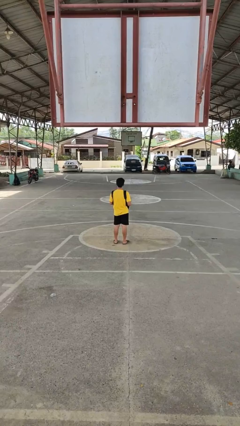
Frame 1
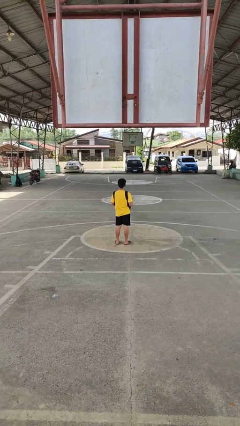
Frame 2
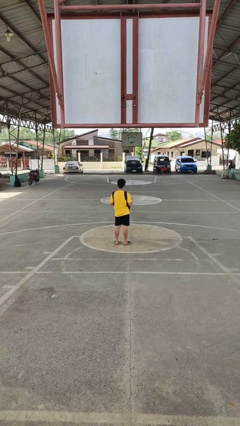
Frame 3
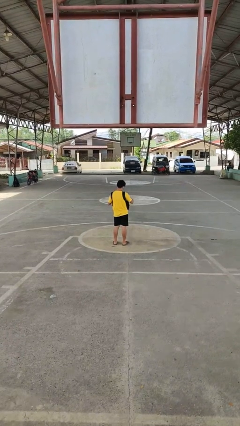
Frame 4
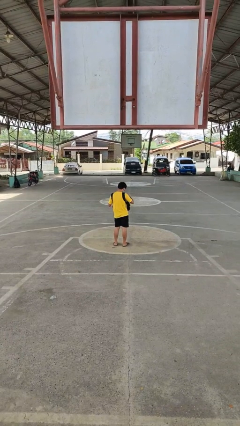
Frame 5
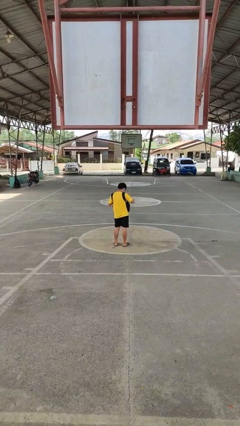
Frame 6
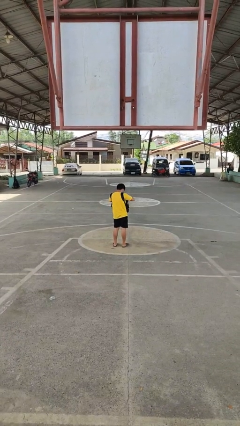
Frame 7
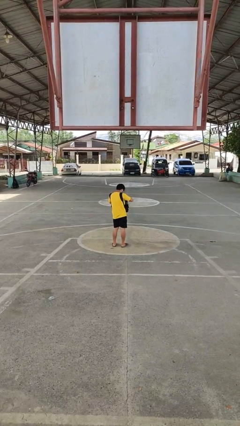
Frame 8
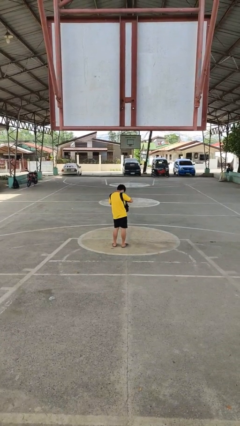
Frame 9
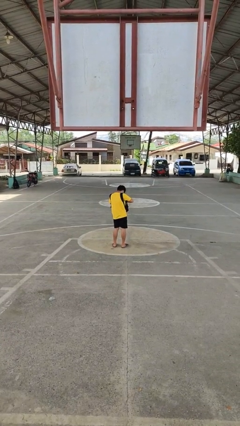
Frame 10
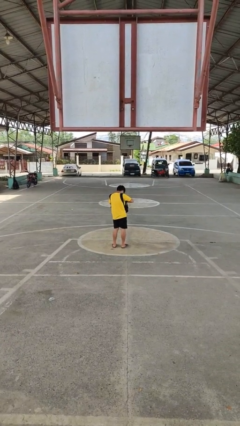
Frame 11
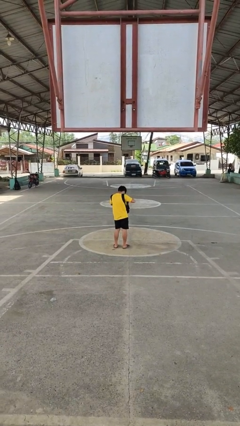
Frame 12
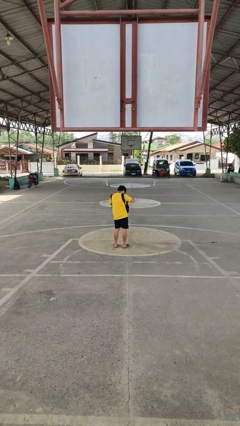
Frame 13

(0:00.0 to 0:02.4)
person searches in backpack

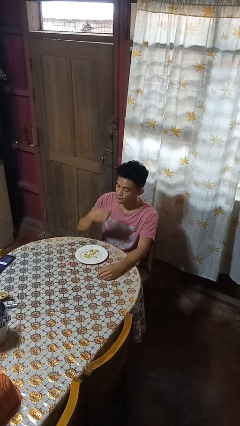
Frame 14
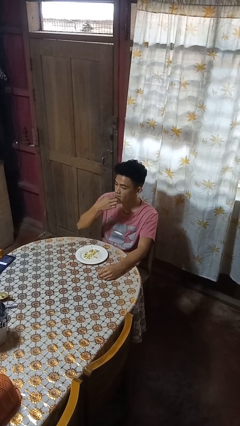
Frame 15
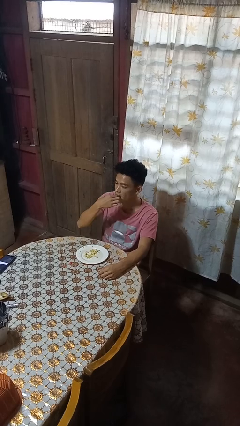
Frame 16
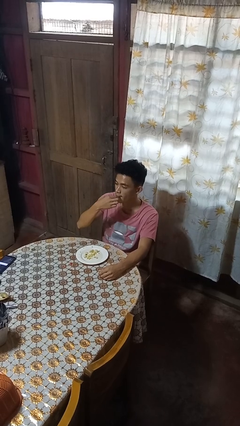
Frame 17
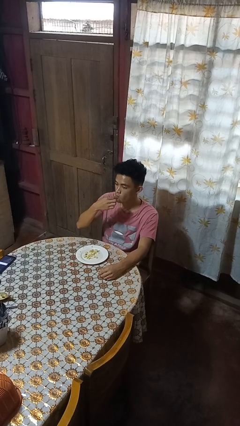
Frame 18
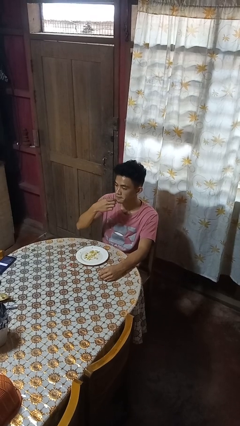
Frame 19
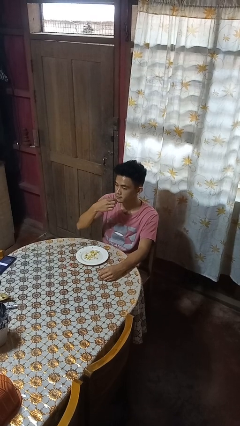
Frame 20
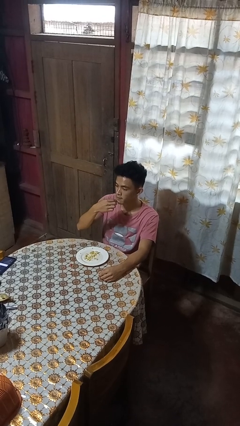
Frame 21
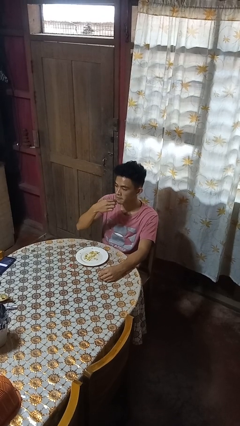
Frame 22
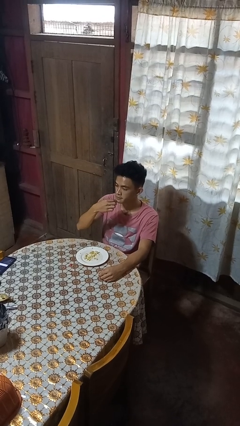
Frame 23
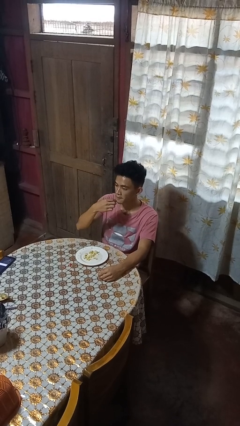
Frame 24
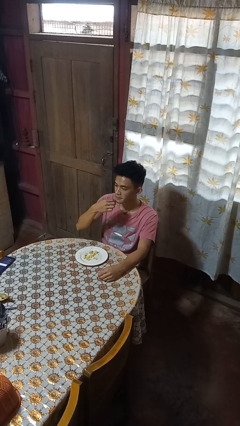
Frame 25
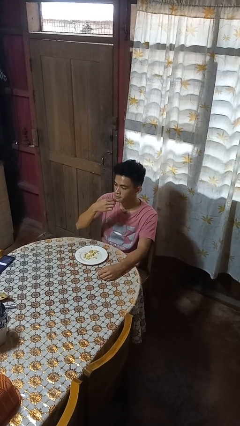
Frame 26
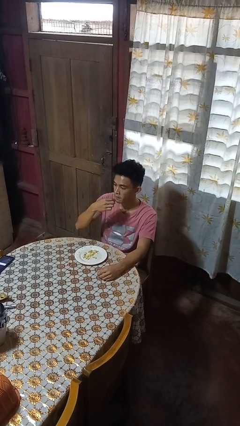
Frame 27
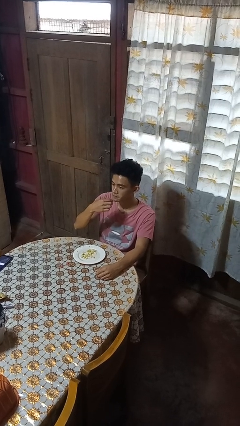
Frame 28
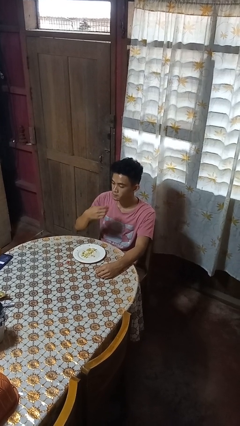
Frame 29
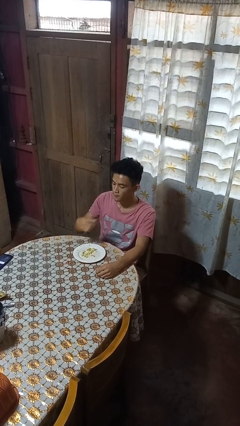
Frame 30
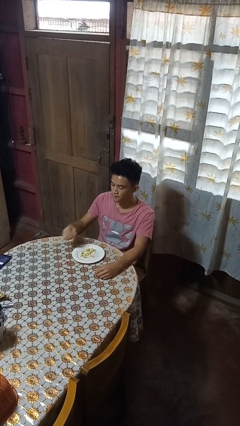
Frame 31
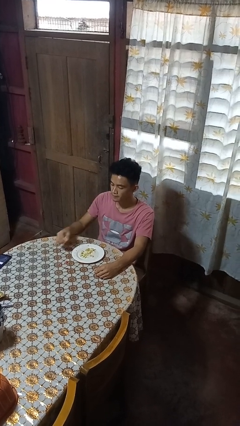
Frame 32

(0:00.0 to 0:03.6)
person eats with hands

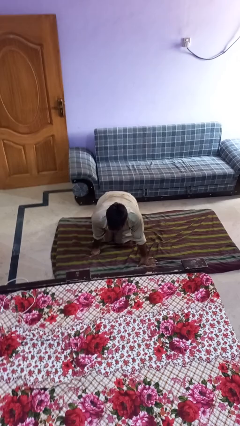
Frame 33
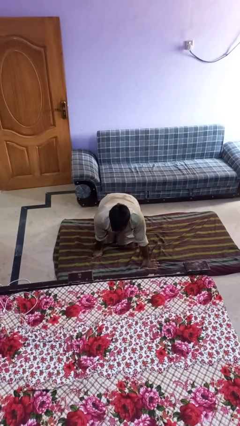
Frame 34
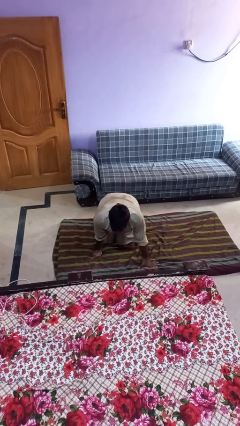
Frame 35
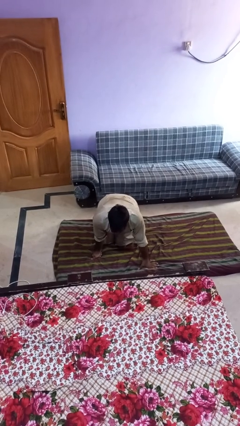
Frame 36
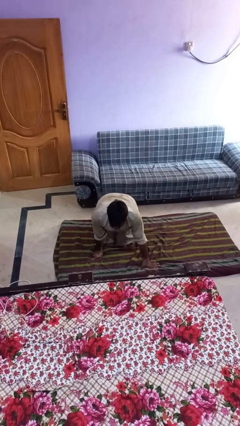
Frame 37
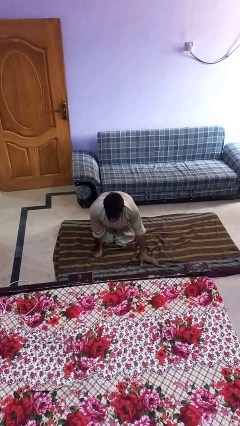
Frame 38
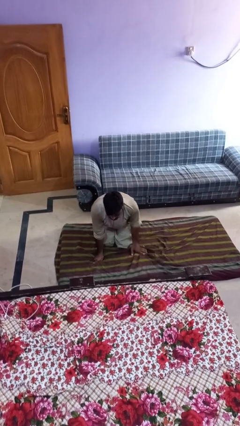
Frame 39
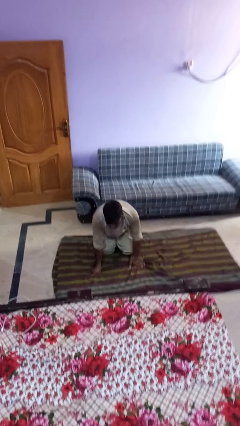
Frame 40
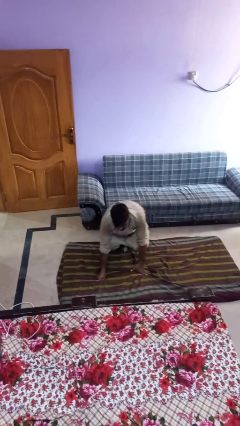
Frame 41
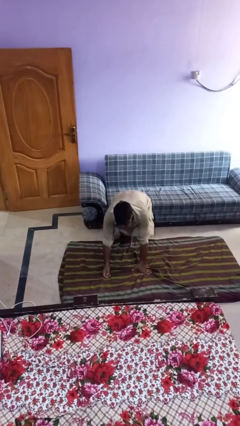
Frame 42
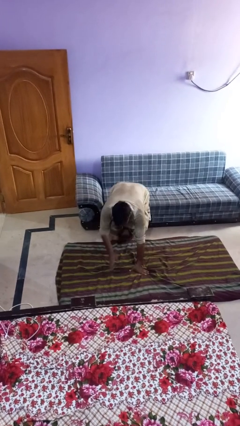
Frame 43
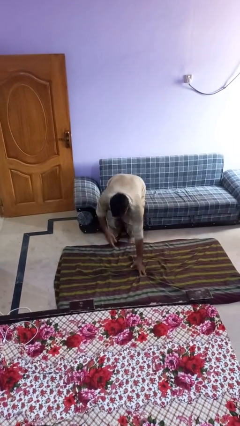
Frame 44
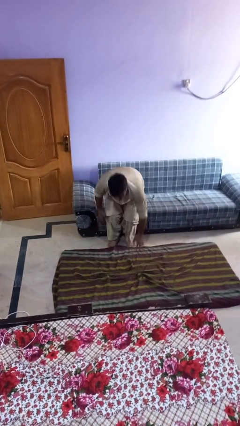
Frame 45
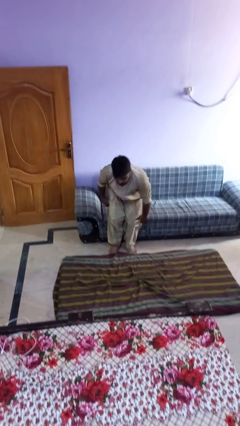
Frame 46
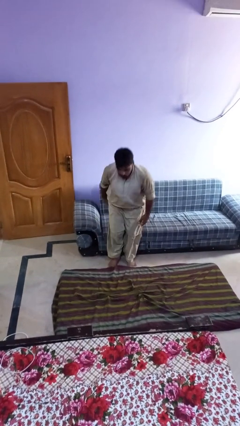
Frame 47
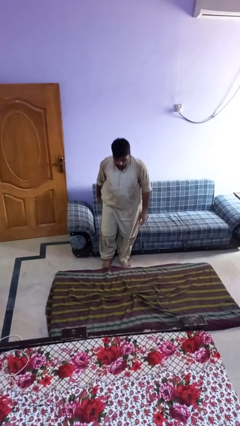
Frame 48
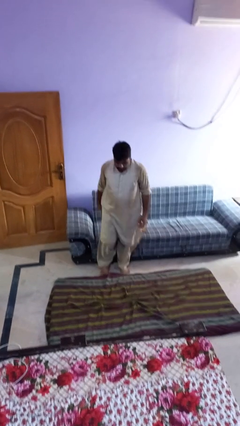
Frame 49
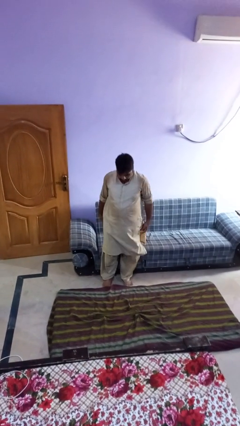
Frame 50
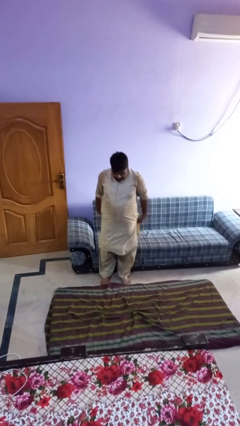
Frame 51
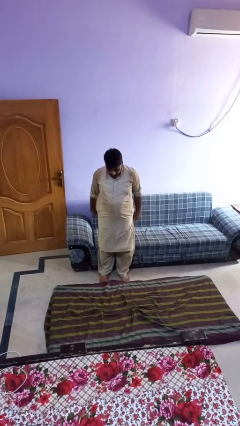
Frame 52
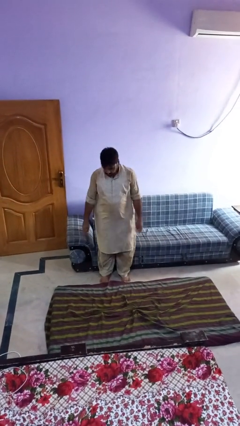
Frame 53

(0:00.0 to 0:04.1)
person stands up from floor

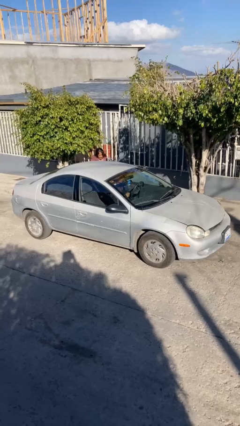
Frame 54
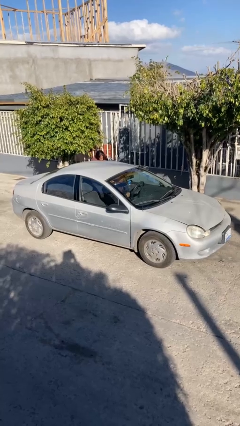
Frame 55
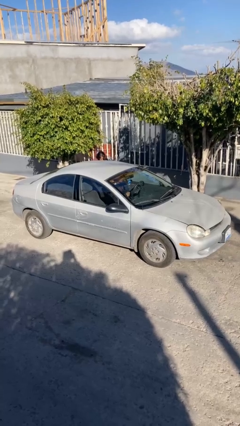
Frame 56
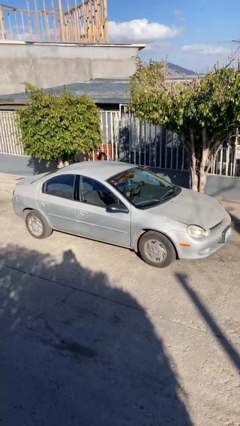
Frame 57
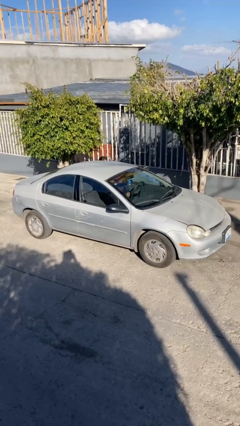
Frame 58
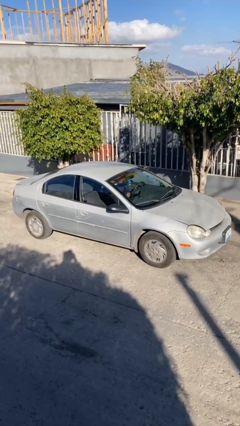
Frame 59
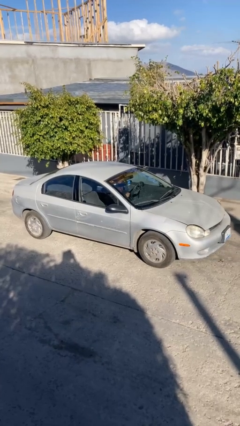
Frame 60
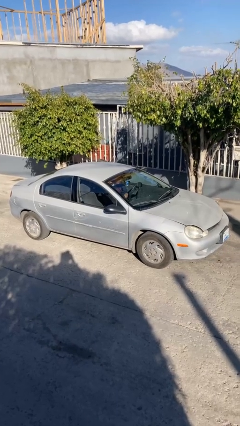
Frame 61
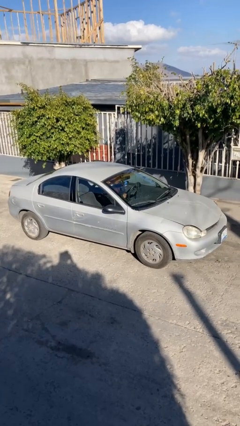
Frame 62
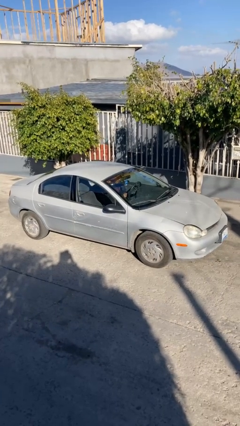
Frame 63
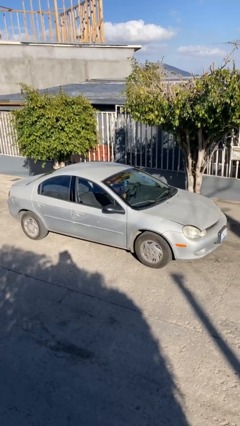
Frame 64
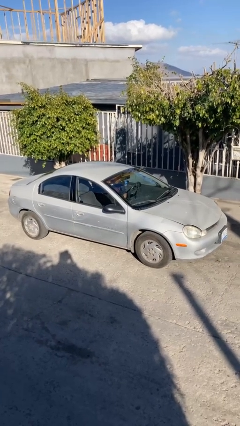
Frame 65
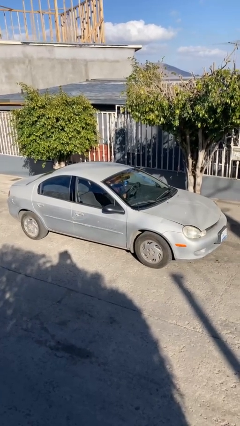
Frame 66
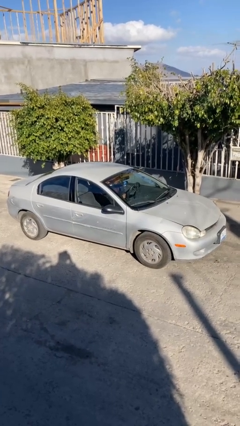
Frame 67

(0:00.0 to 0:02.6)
car picks up person

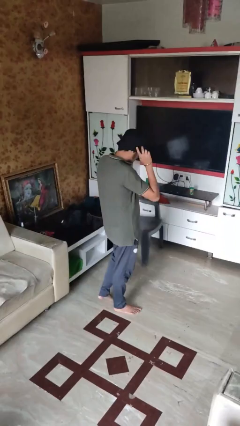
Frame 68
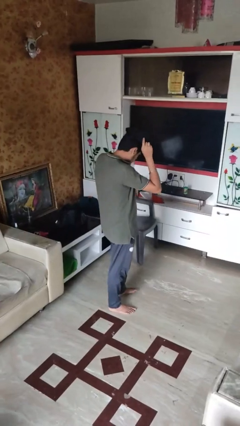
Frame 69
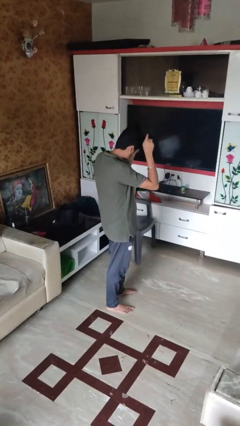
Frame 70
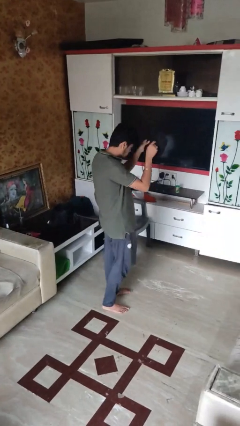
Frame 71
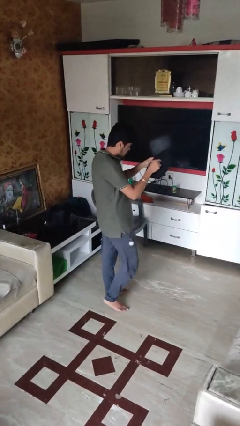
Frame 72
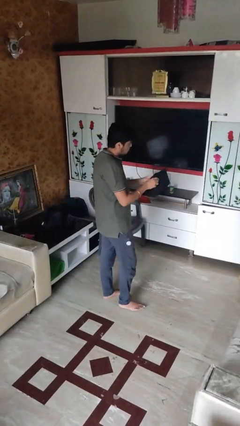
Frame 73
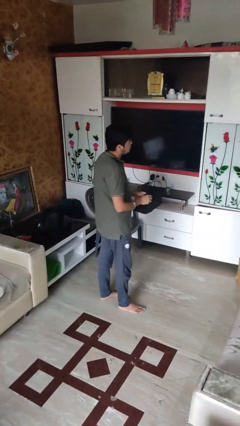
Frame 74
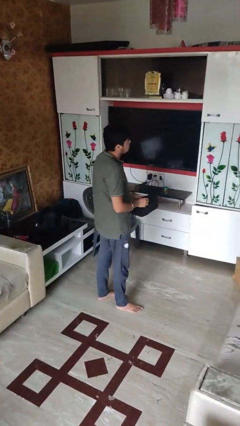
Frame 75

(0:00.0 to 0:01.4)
person takes off hat

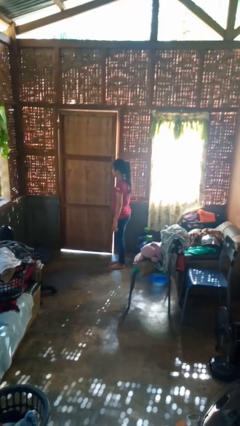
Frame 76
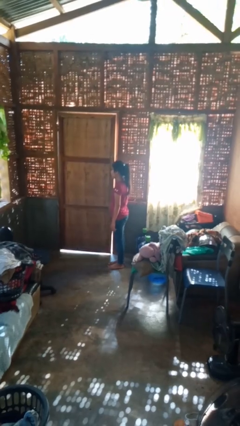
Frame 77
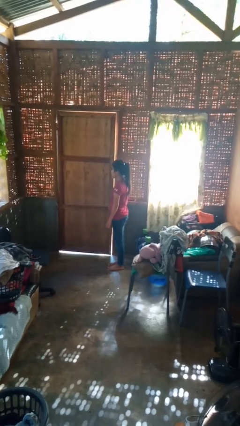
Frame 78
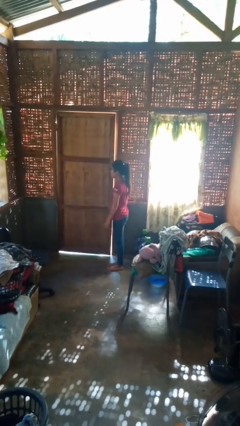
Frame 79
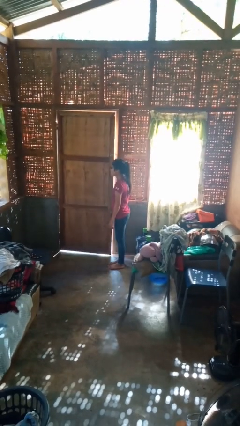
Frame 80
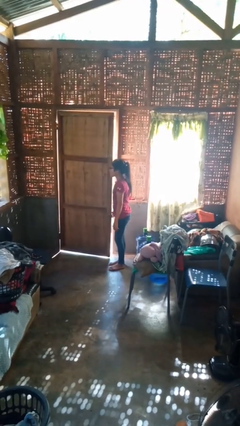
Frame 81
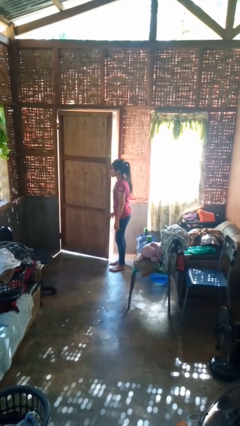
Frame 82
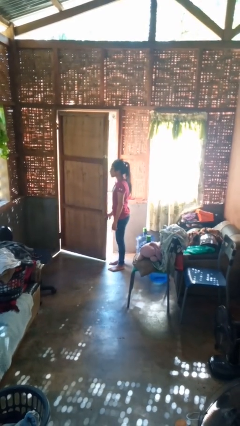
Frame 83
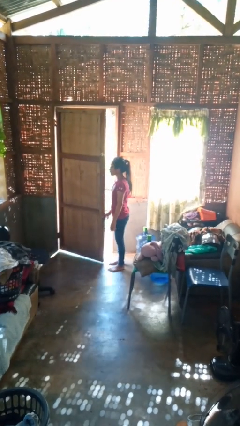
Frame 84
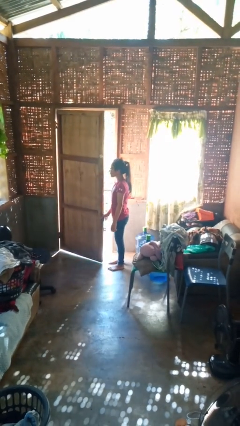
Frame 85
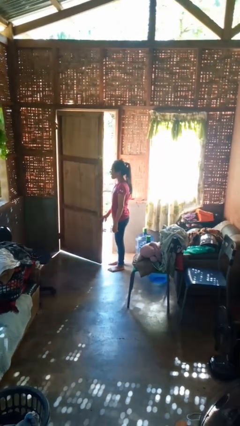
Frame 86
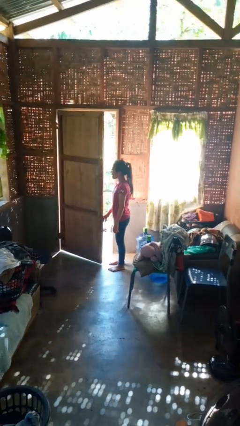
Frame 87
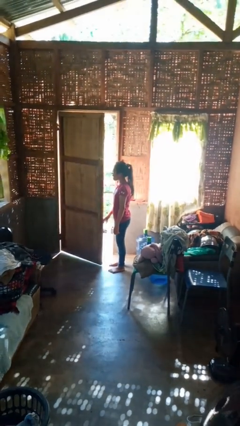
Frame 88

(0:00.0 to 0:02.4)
person opens facility door

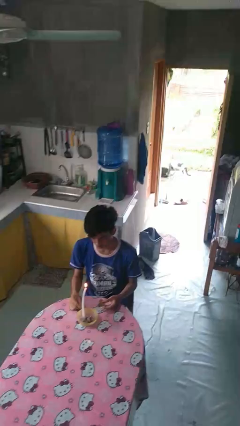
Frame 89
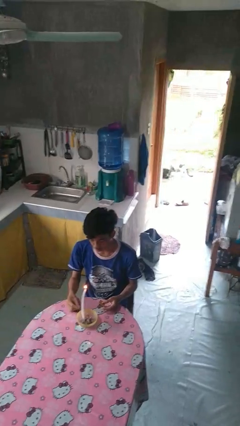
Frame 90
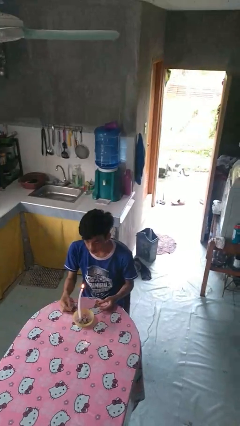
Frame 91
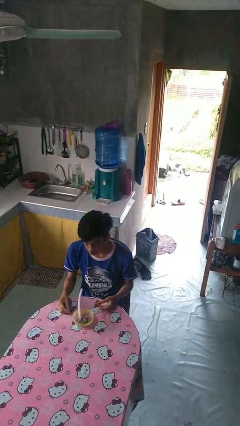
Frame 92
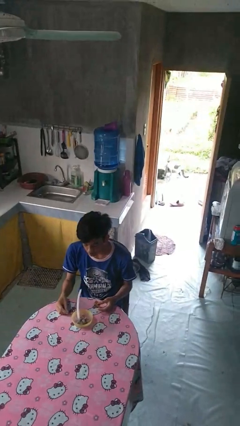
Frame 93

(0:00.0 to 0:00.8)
person extinguishes candle

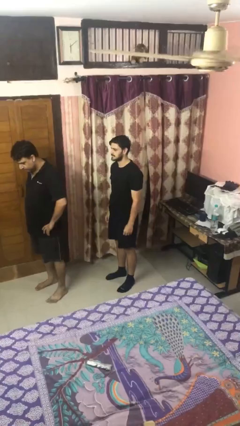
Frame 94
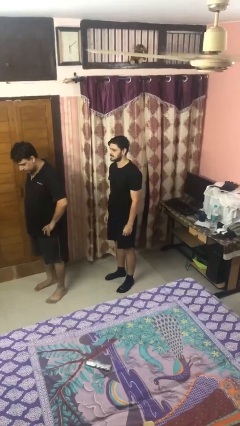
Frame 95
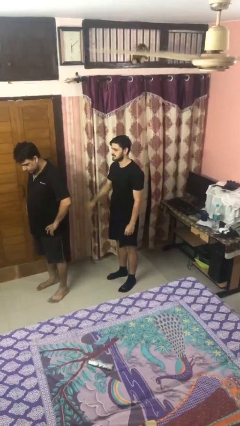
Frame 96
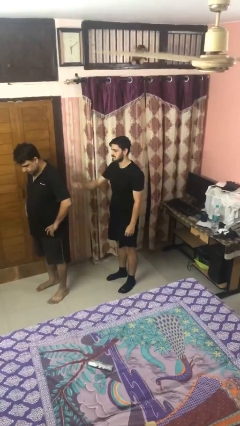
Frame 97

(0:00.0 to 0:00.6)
person grabs person by shoulder
